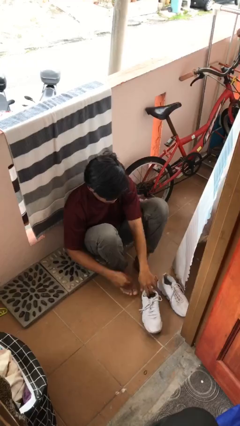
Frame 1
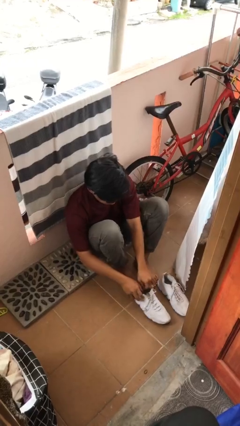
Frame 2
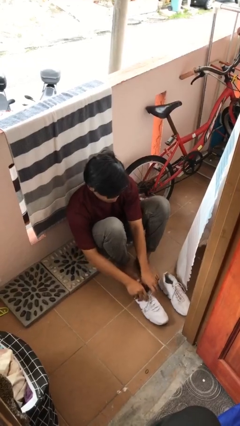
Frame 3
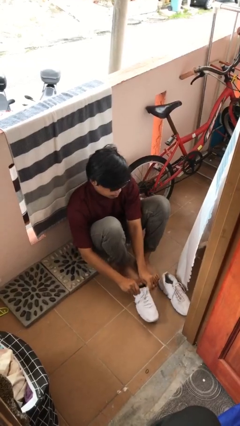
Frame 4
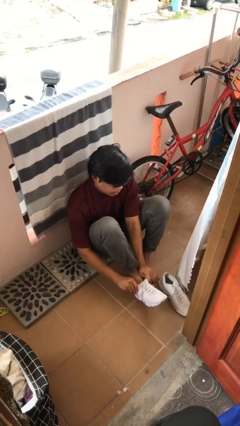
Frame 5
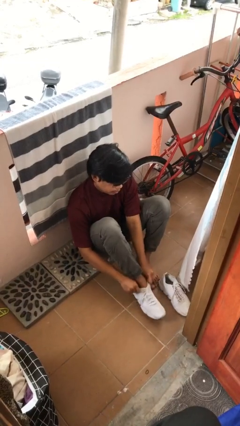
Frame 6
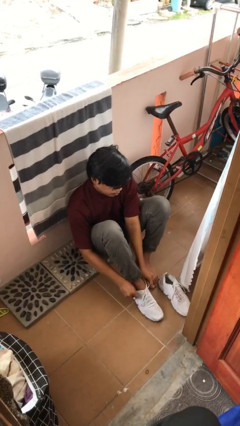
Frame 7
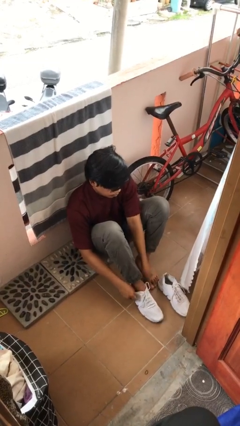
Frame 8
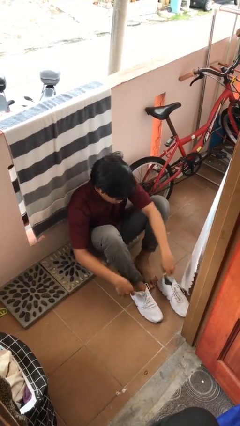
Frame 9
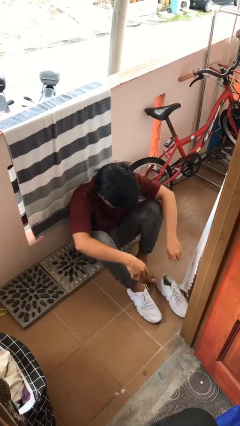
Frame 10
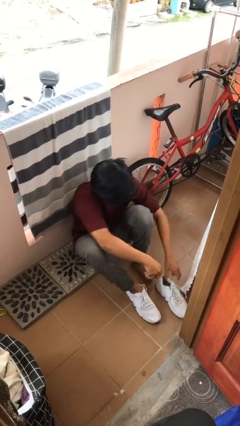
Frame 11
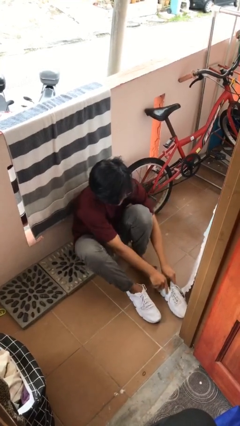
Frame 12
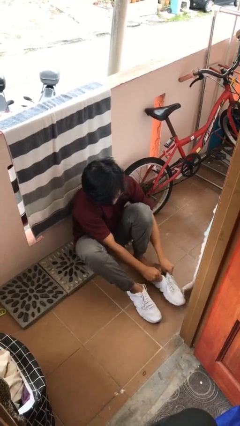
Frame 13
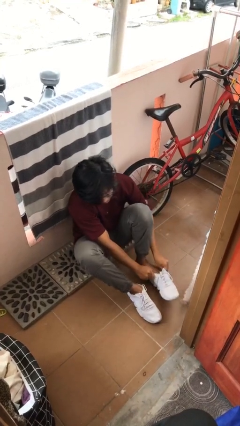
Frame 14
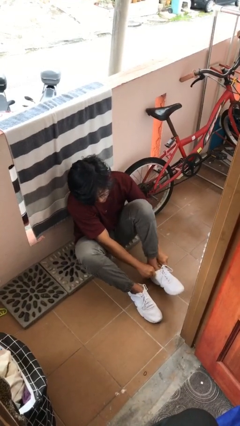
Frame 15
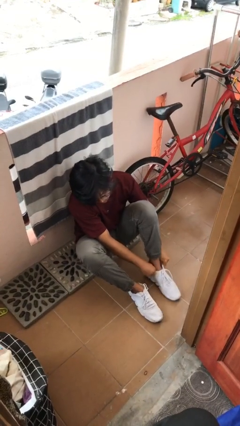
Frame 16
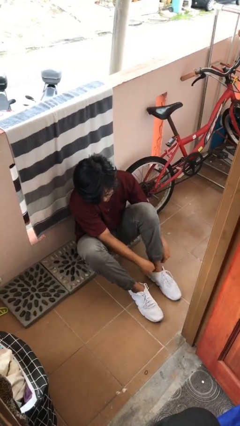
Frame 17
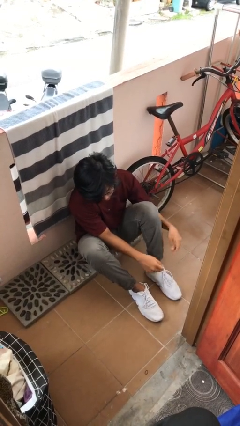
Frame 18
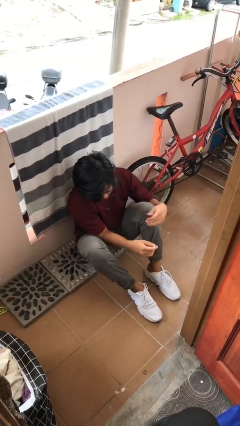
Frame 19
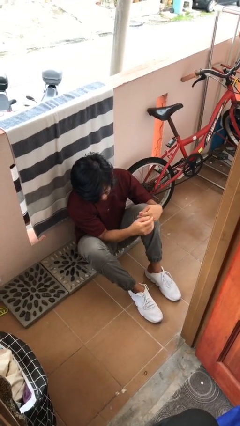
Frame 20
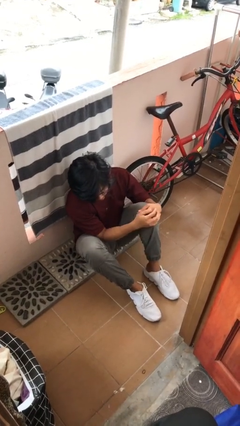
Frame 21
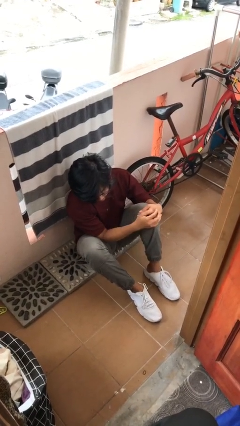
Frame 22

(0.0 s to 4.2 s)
person puts on shoes

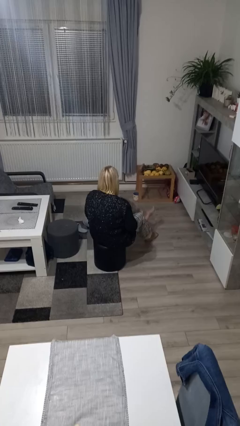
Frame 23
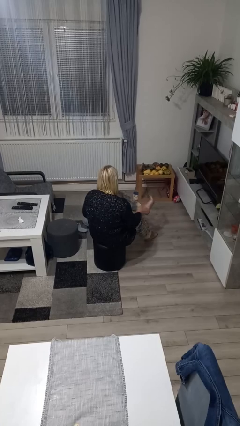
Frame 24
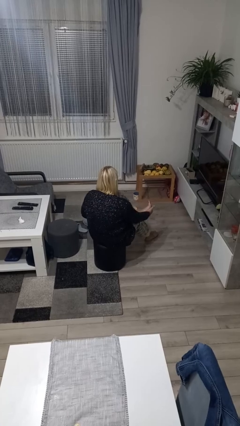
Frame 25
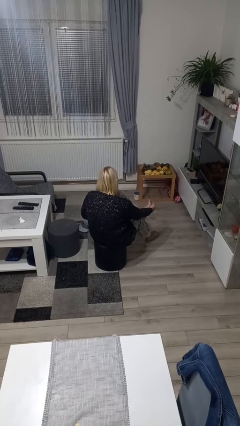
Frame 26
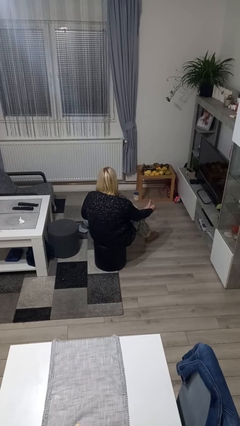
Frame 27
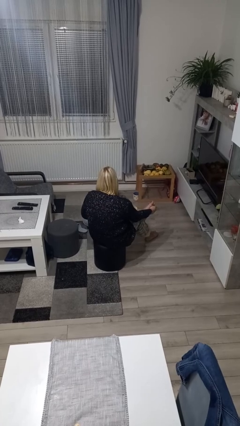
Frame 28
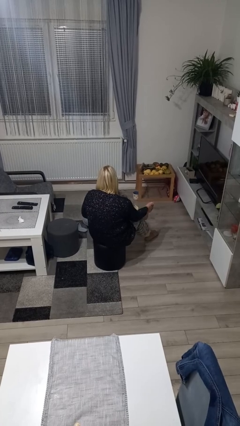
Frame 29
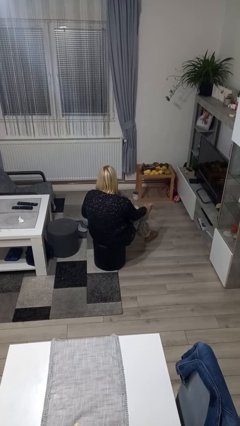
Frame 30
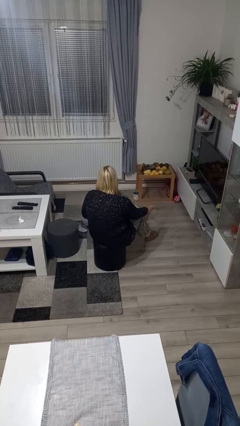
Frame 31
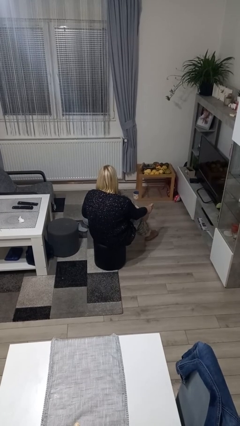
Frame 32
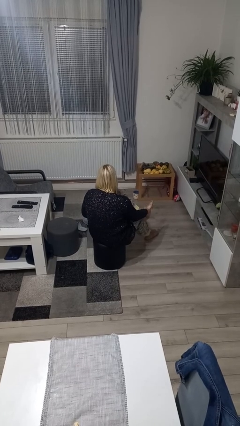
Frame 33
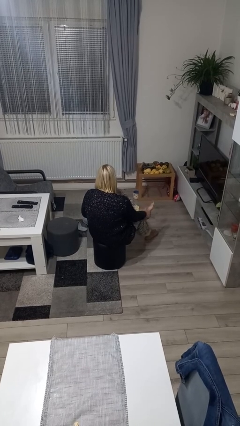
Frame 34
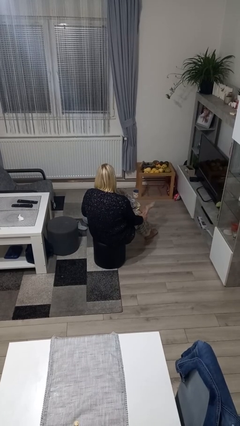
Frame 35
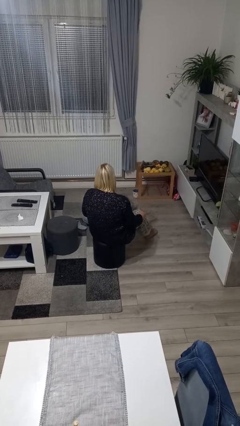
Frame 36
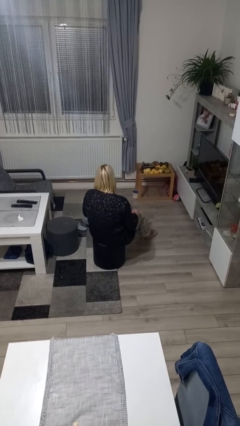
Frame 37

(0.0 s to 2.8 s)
person rubs foot

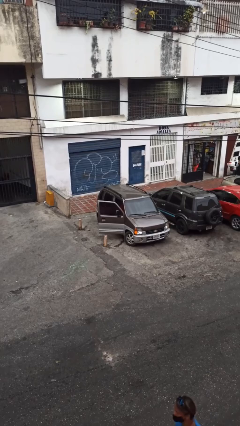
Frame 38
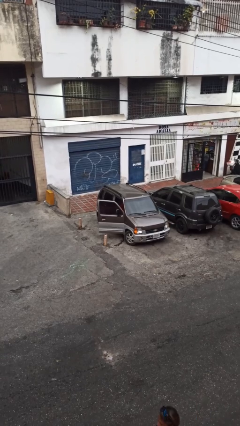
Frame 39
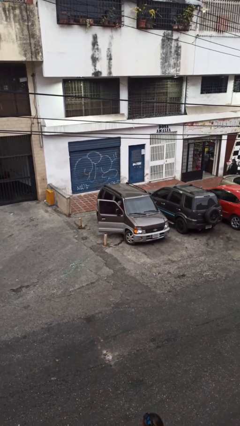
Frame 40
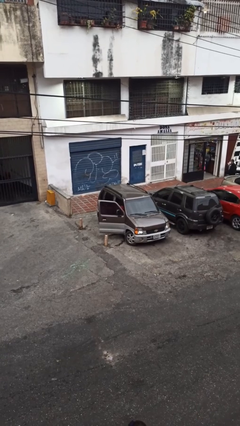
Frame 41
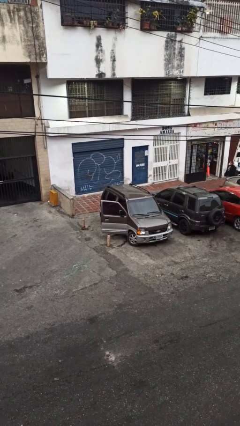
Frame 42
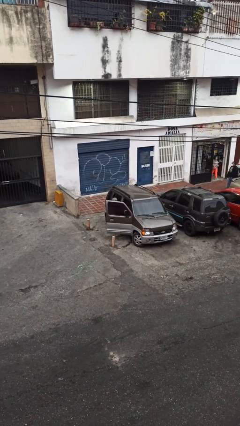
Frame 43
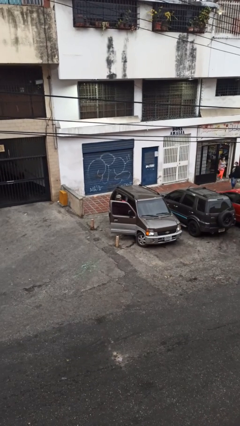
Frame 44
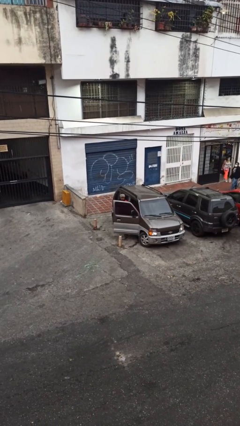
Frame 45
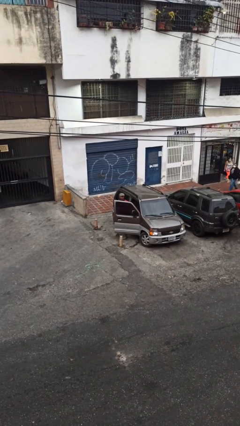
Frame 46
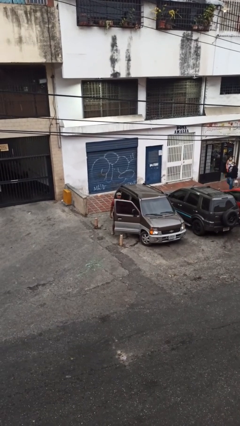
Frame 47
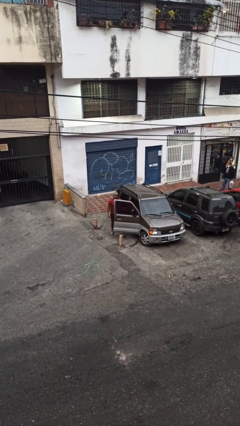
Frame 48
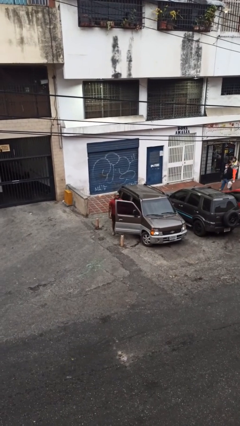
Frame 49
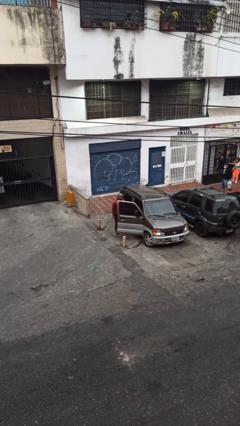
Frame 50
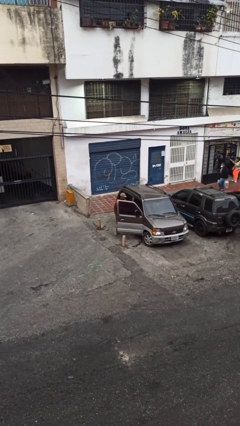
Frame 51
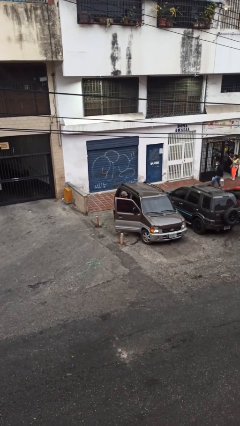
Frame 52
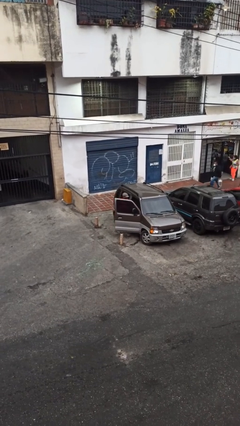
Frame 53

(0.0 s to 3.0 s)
person exits car

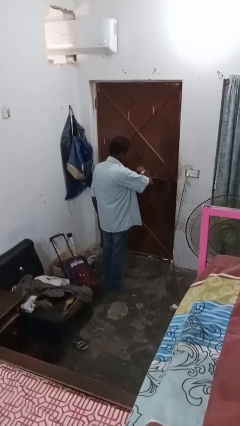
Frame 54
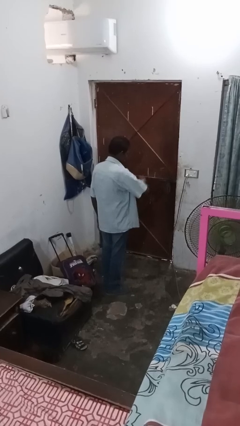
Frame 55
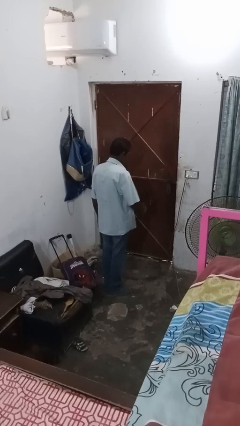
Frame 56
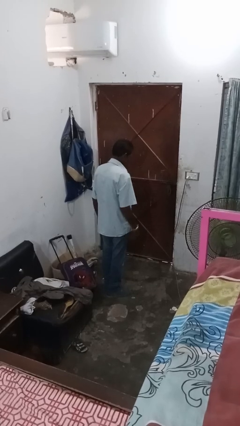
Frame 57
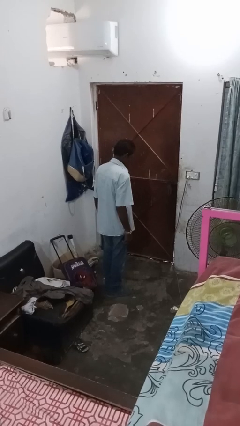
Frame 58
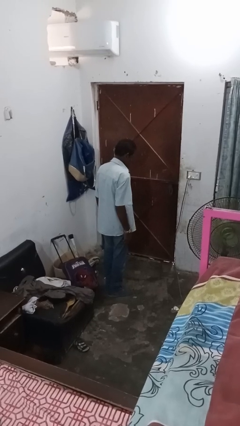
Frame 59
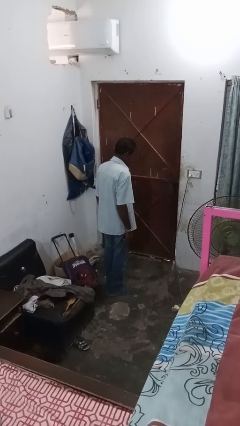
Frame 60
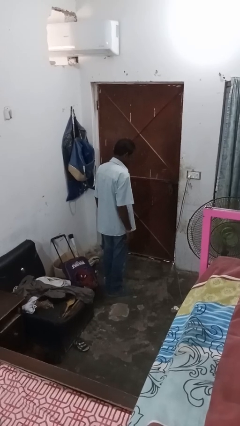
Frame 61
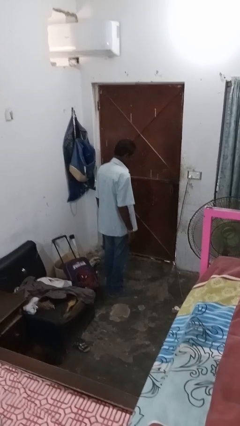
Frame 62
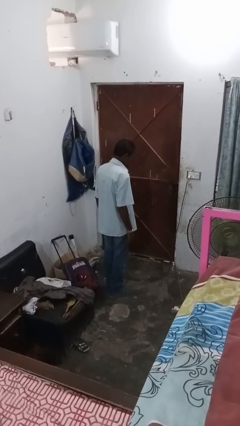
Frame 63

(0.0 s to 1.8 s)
person takes off wristwatch

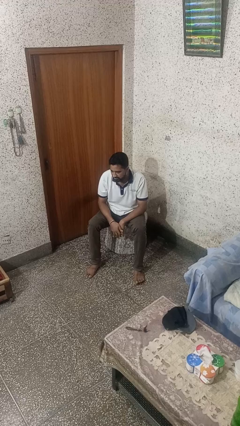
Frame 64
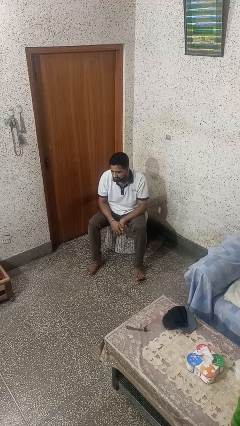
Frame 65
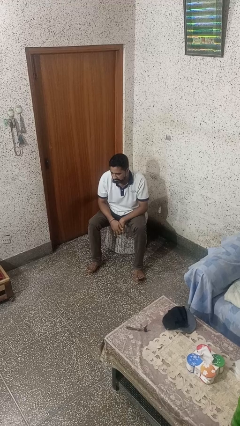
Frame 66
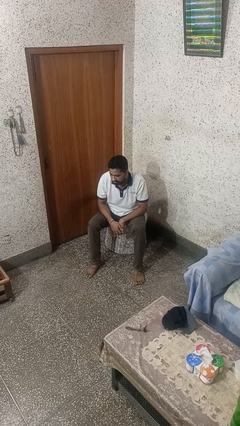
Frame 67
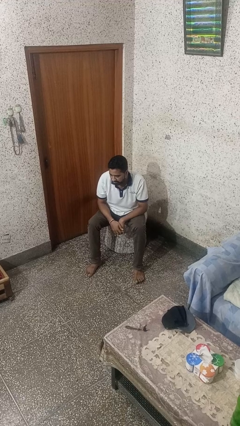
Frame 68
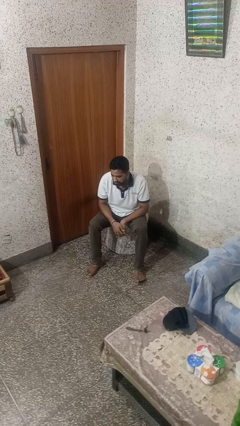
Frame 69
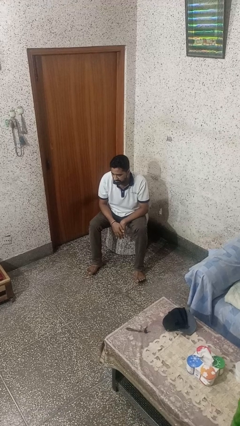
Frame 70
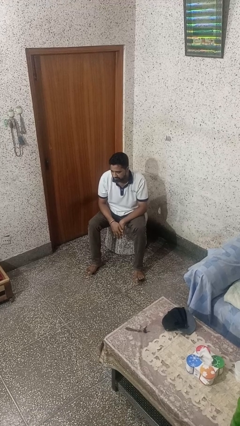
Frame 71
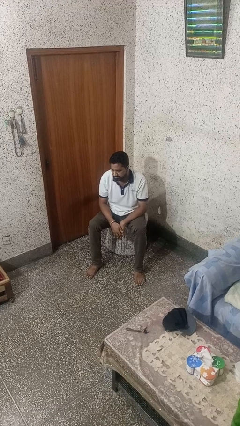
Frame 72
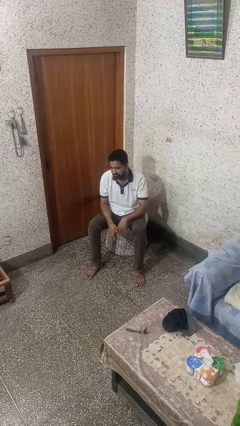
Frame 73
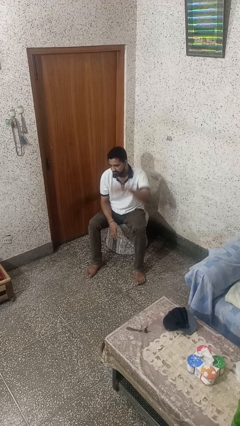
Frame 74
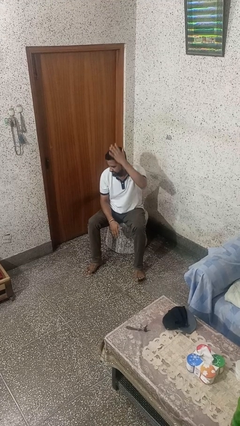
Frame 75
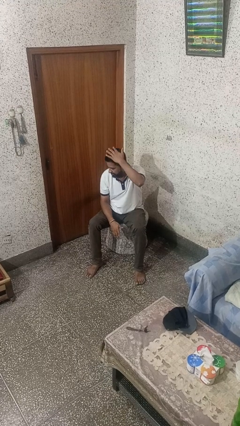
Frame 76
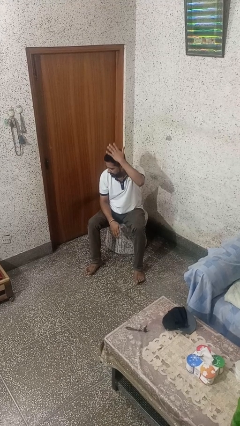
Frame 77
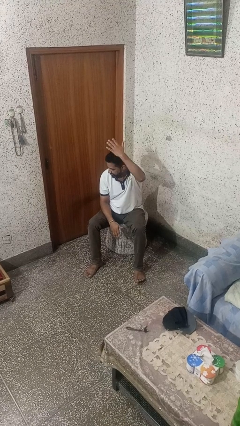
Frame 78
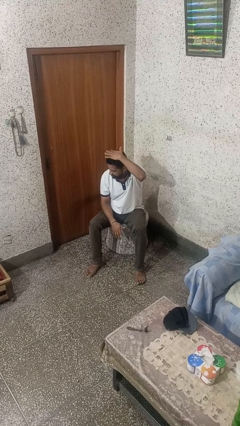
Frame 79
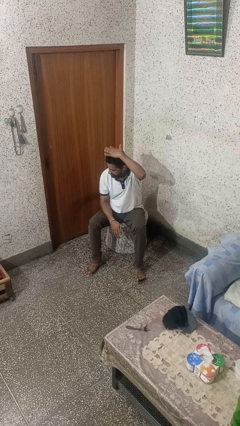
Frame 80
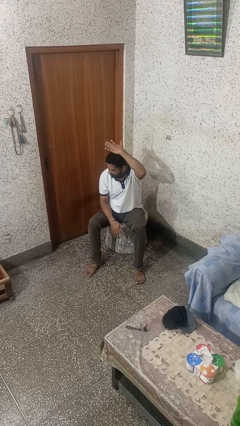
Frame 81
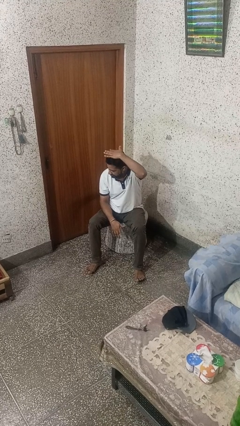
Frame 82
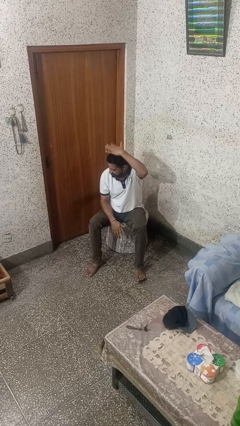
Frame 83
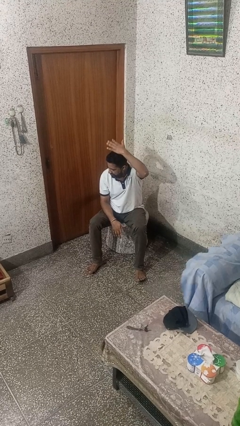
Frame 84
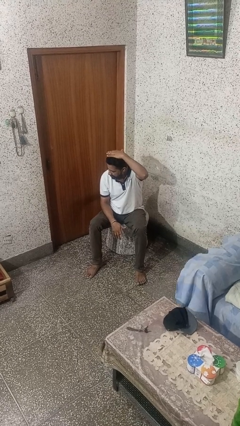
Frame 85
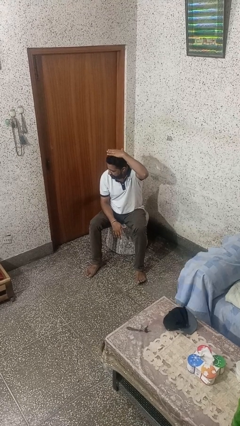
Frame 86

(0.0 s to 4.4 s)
person gestures cut

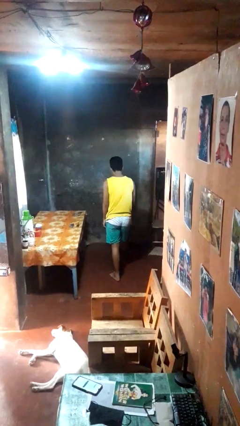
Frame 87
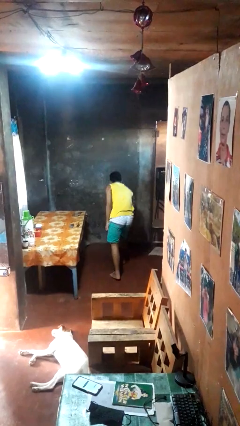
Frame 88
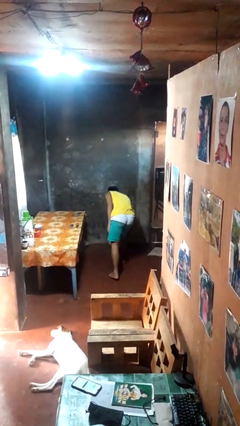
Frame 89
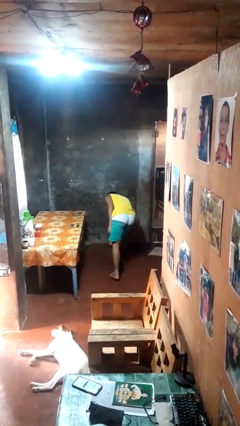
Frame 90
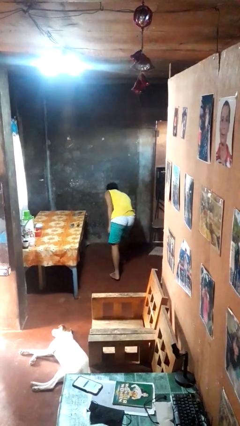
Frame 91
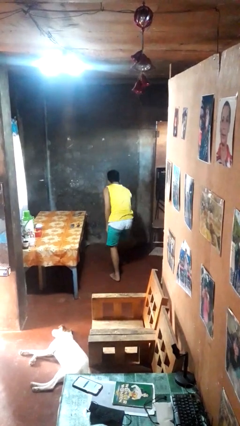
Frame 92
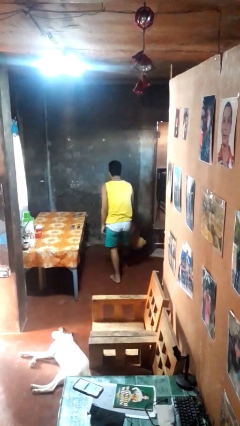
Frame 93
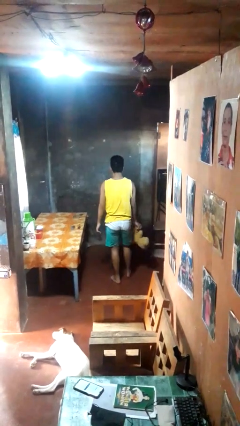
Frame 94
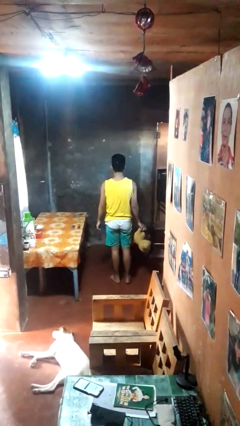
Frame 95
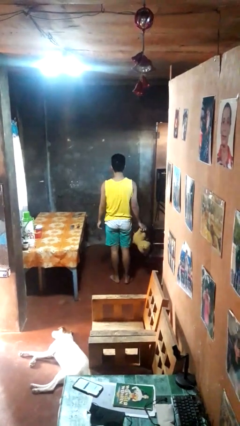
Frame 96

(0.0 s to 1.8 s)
person picks up object from floor
